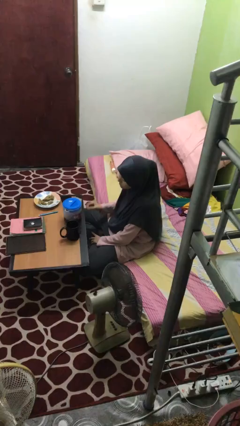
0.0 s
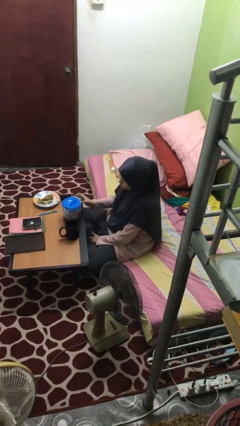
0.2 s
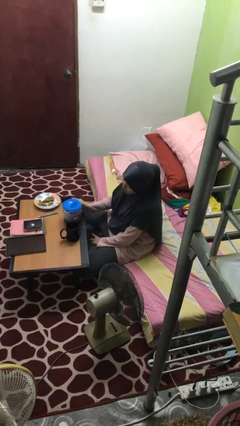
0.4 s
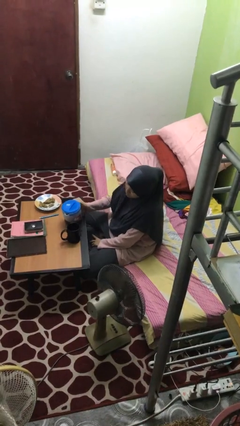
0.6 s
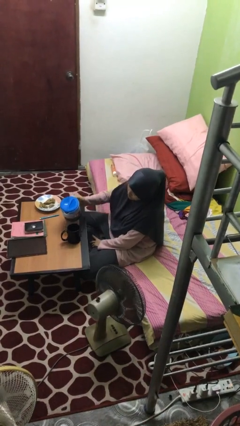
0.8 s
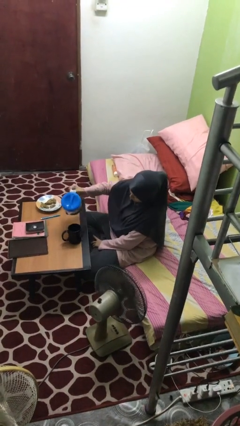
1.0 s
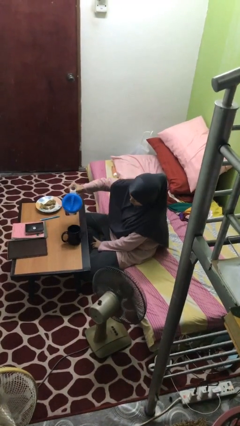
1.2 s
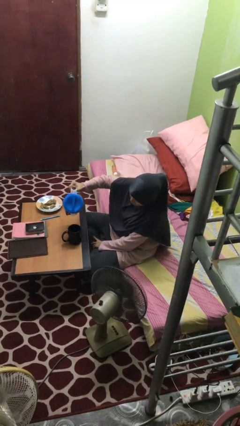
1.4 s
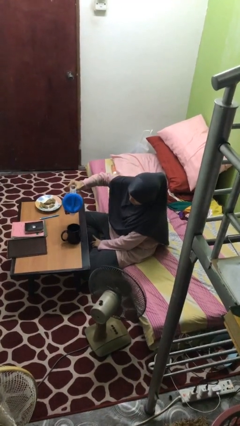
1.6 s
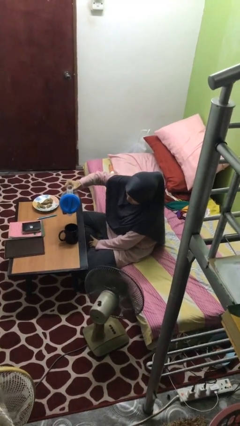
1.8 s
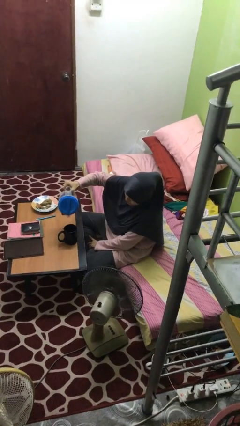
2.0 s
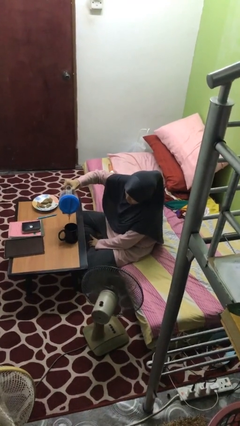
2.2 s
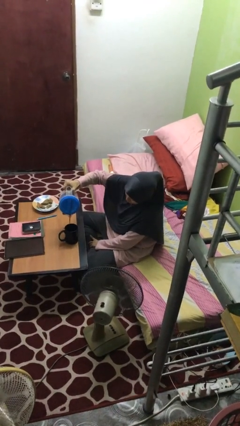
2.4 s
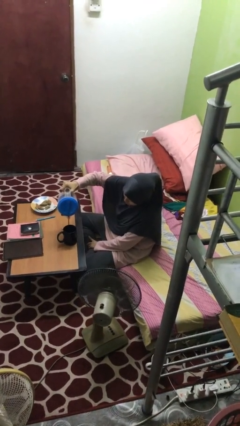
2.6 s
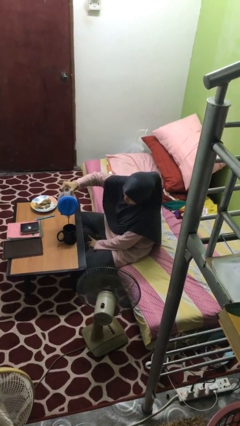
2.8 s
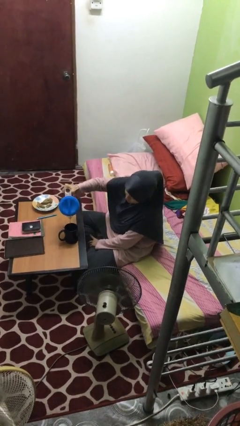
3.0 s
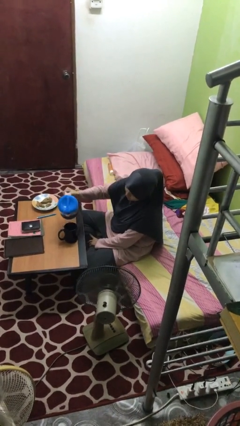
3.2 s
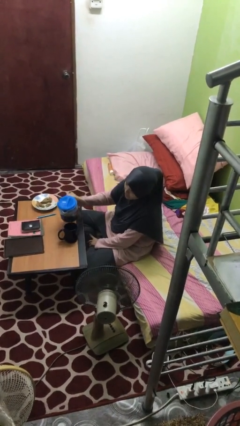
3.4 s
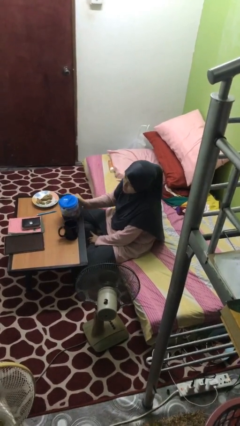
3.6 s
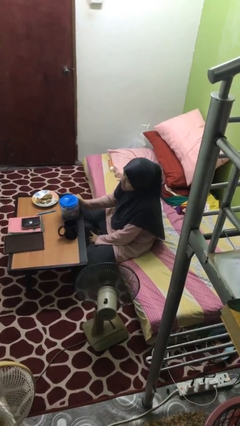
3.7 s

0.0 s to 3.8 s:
person pours coffee into mug

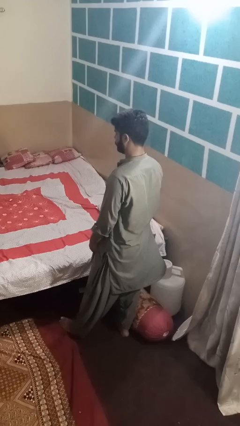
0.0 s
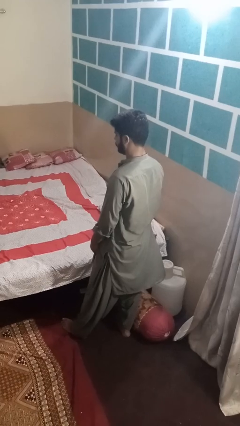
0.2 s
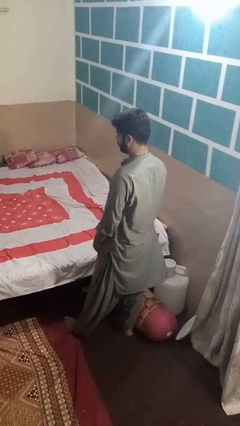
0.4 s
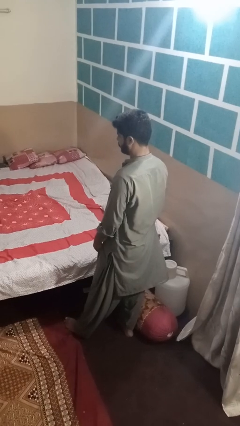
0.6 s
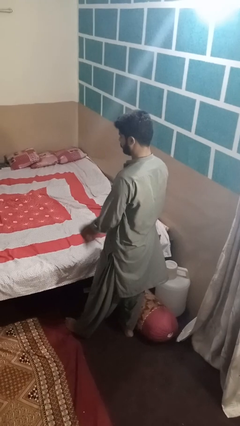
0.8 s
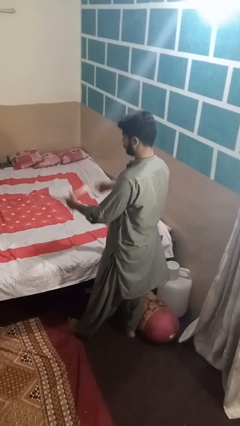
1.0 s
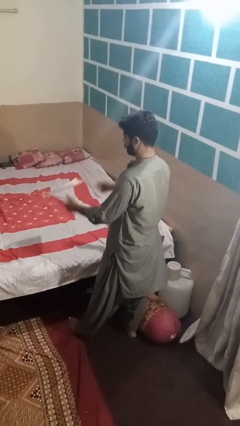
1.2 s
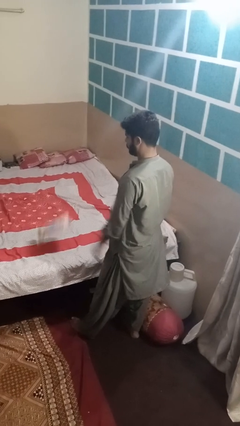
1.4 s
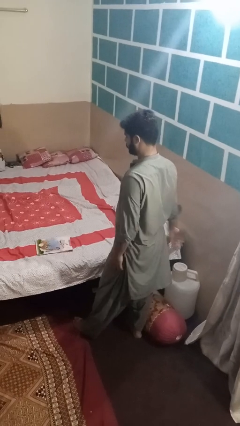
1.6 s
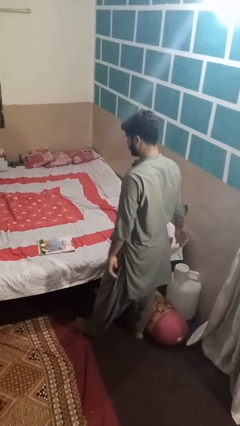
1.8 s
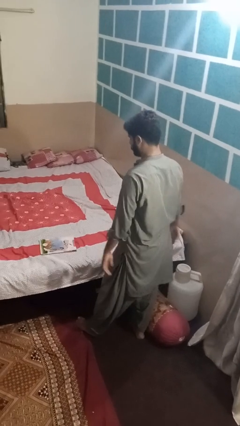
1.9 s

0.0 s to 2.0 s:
person throws object on bed

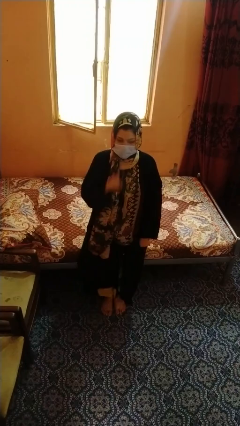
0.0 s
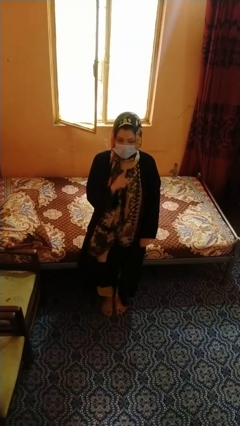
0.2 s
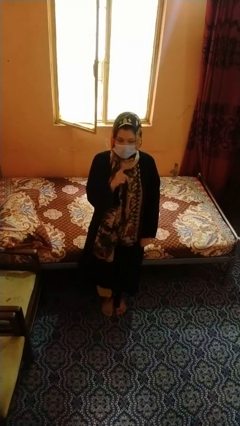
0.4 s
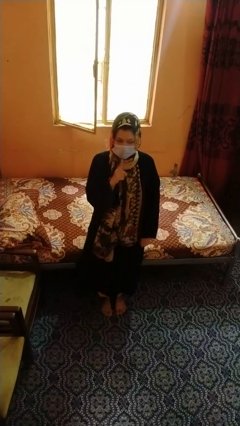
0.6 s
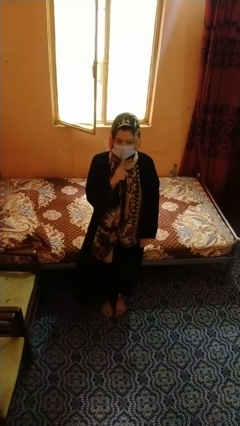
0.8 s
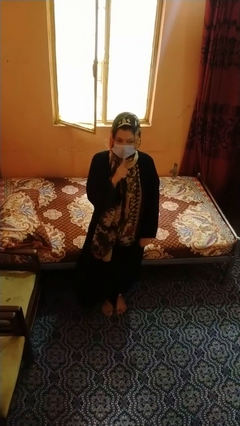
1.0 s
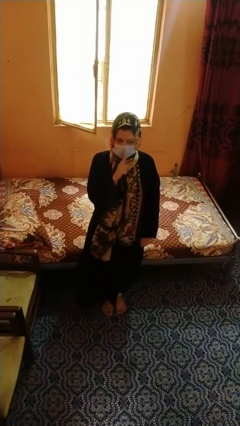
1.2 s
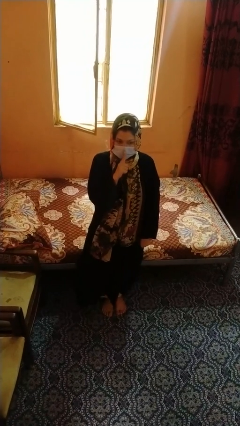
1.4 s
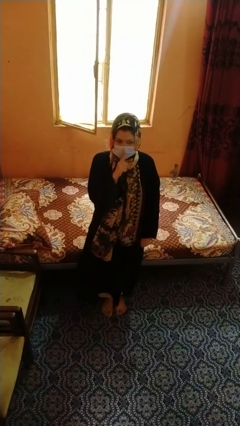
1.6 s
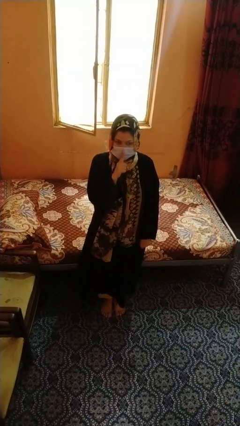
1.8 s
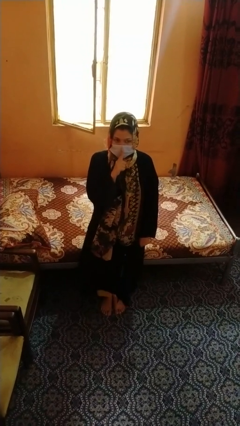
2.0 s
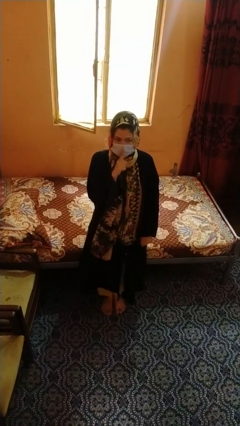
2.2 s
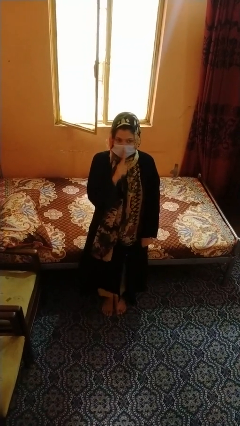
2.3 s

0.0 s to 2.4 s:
person gestures be quiet

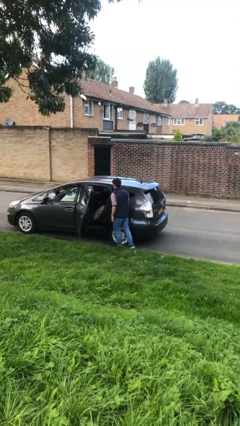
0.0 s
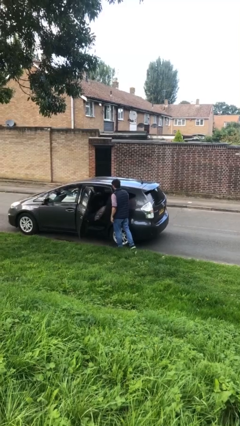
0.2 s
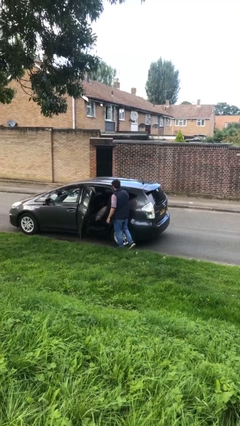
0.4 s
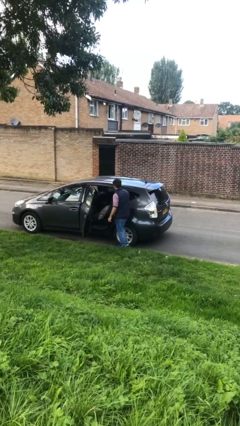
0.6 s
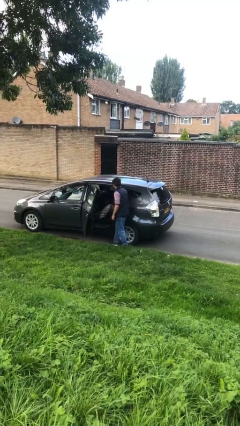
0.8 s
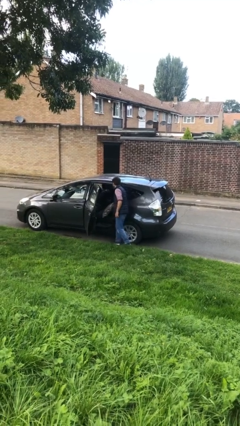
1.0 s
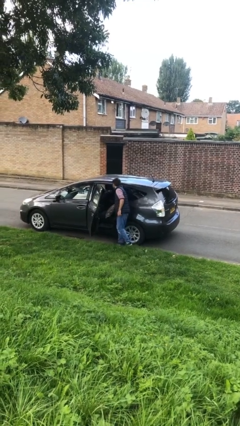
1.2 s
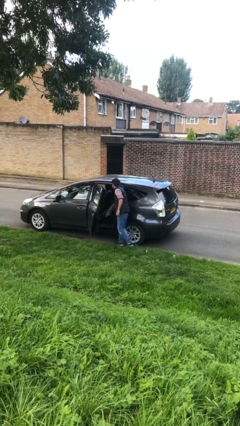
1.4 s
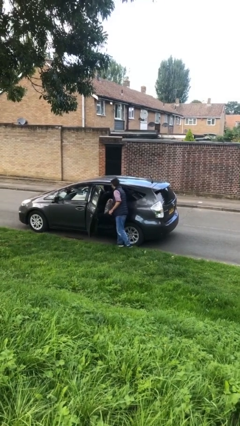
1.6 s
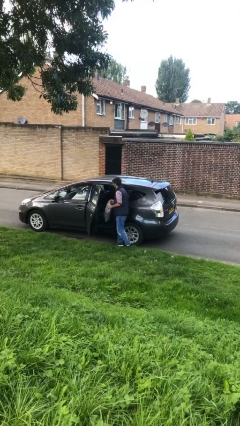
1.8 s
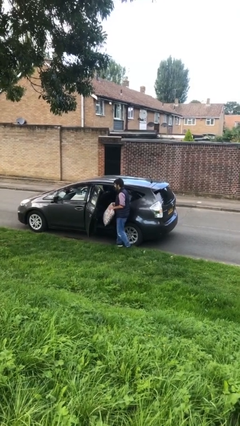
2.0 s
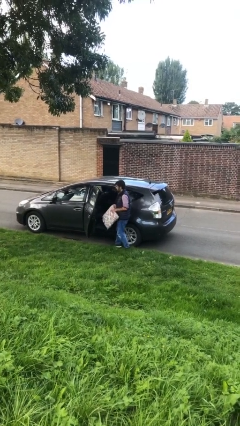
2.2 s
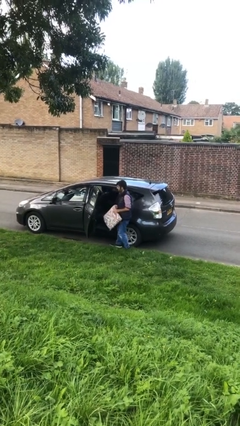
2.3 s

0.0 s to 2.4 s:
person unloads car

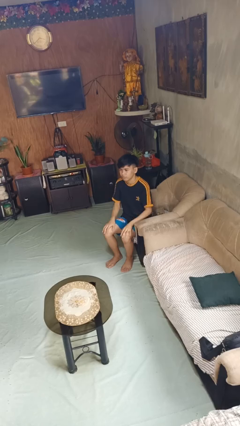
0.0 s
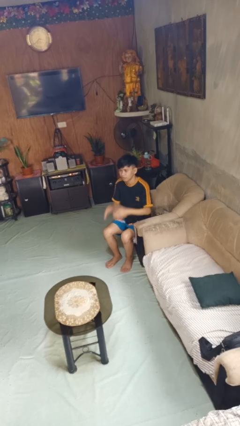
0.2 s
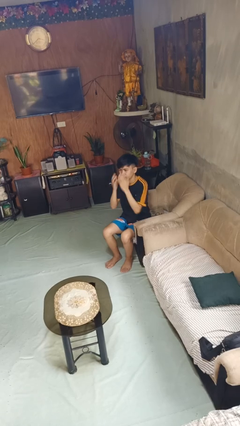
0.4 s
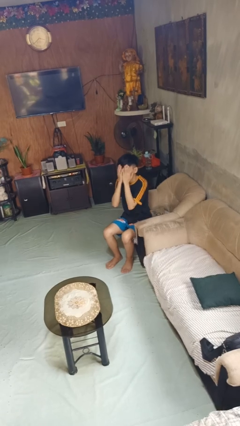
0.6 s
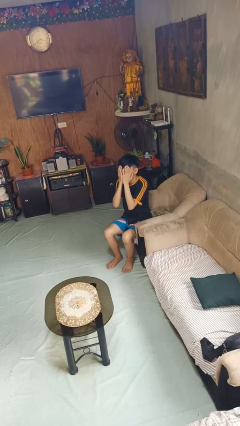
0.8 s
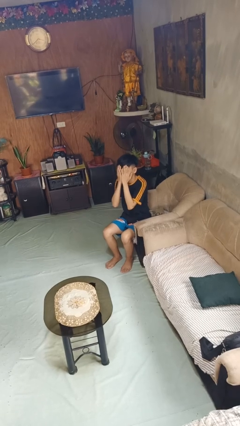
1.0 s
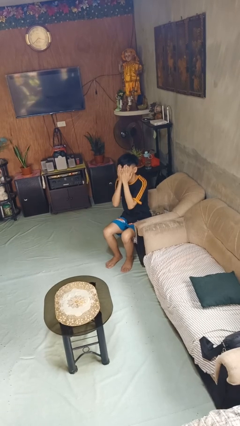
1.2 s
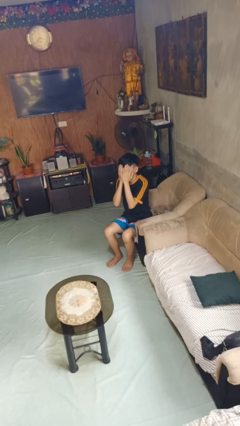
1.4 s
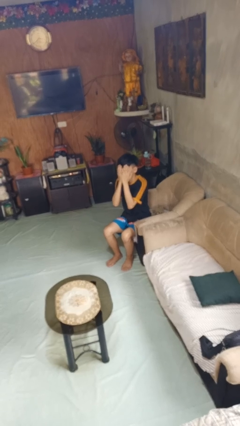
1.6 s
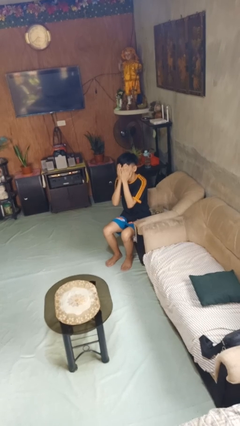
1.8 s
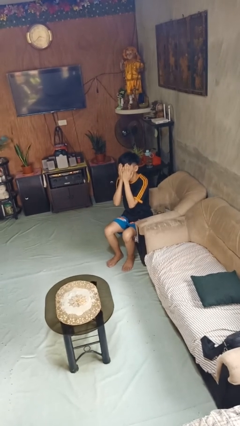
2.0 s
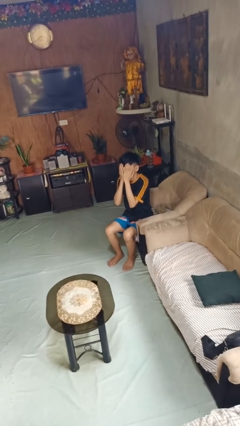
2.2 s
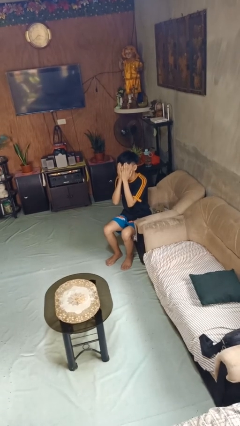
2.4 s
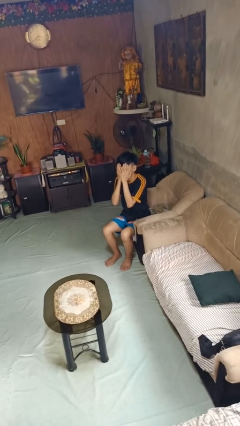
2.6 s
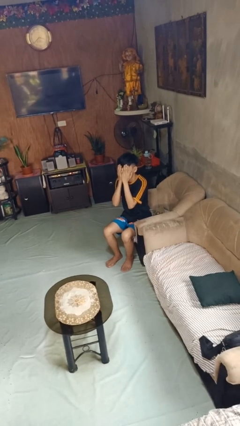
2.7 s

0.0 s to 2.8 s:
person covers face with hands

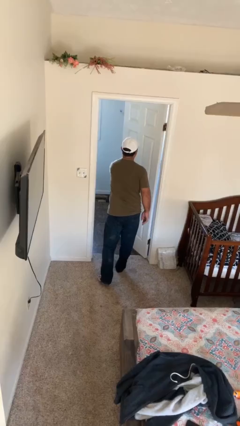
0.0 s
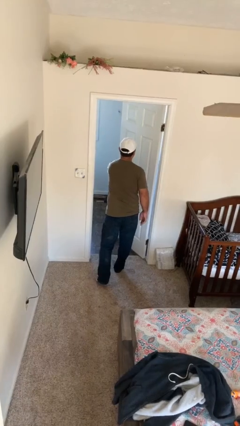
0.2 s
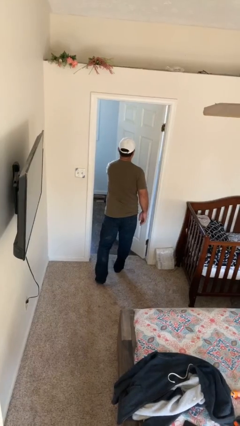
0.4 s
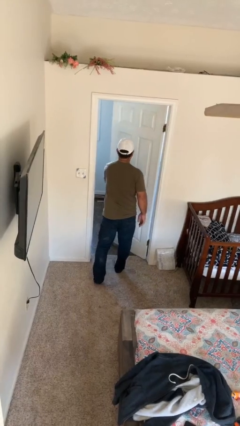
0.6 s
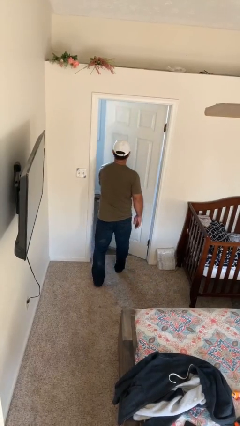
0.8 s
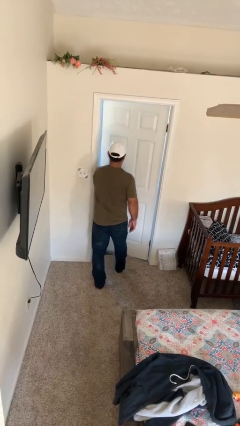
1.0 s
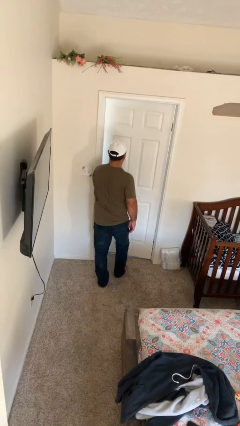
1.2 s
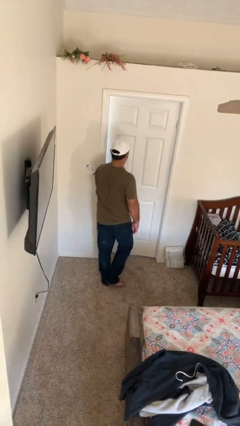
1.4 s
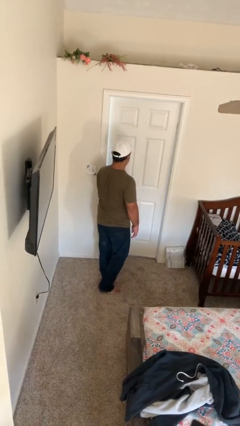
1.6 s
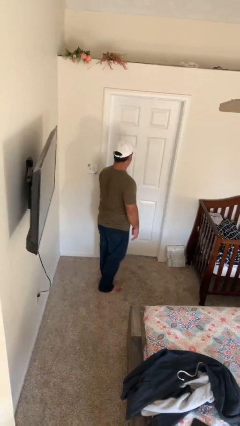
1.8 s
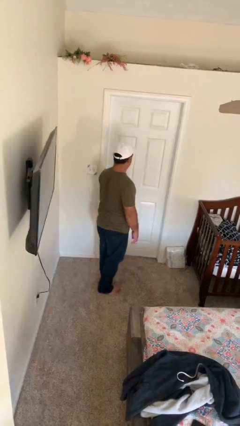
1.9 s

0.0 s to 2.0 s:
person closes facility door

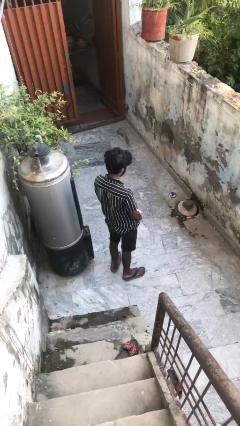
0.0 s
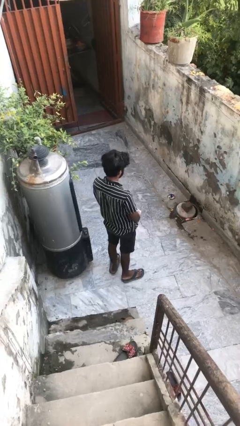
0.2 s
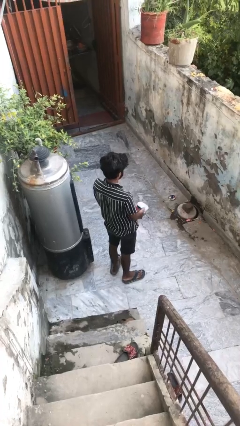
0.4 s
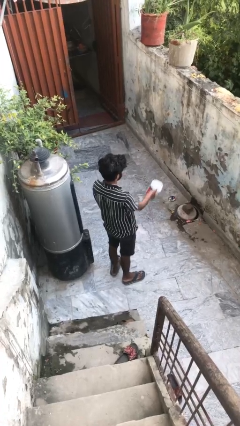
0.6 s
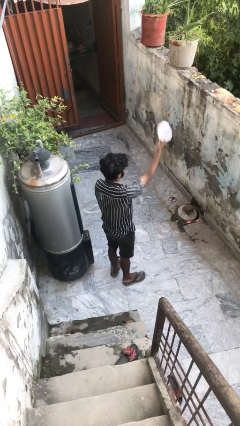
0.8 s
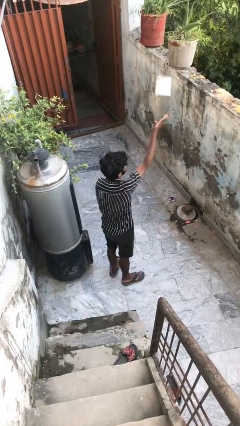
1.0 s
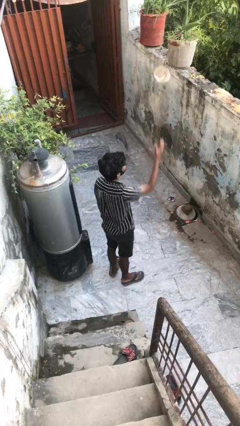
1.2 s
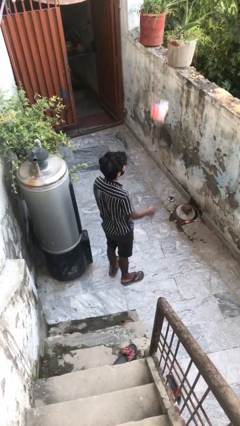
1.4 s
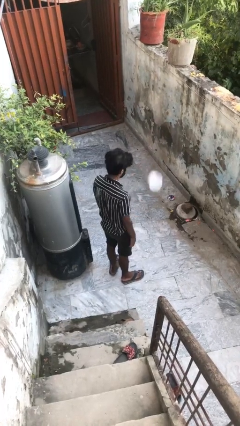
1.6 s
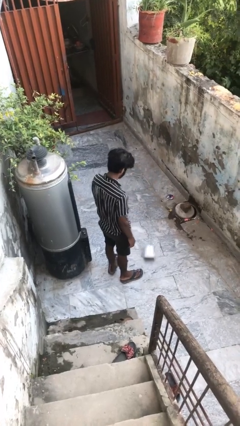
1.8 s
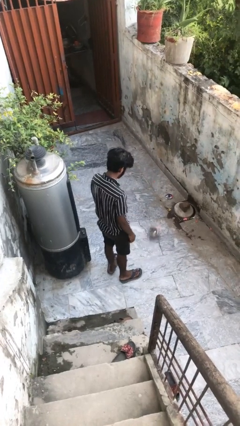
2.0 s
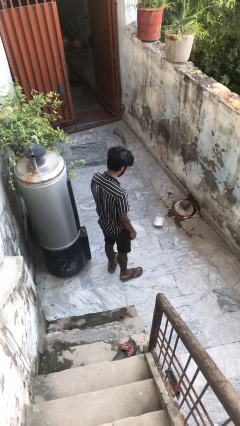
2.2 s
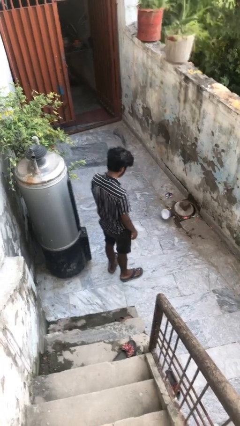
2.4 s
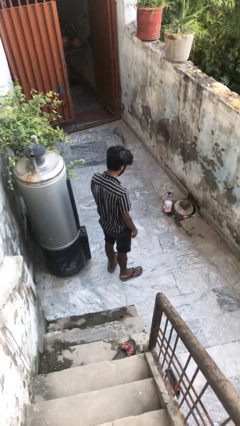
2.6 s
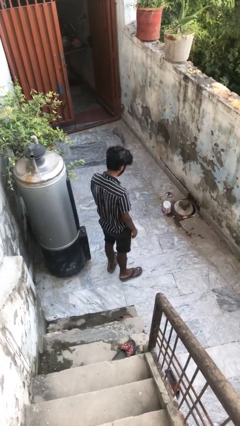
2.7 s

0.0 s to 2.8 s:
person throws object into air
